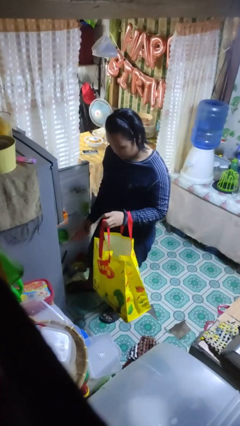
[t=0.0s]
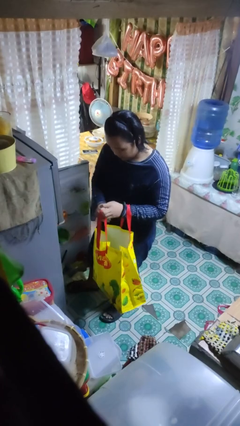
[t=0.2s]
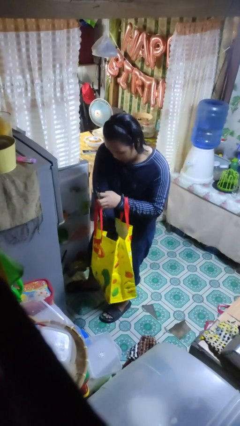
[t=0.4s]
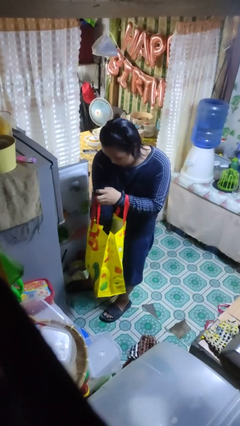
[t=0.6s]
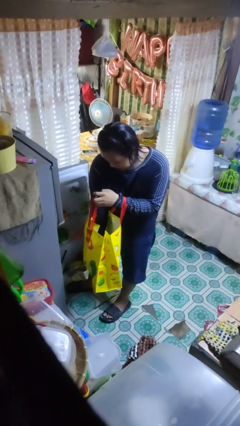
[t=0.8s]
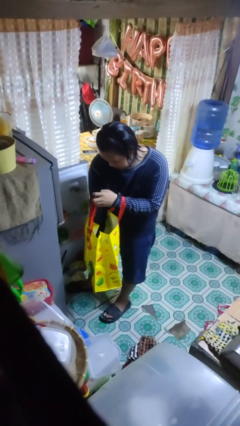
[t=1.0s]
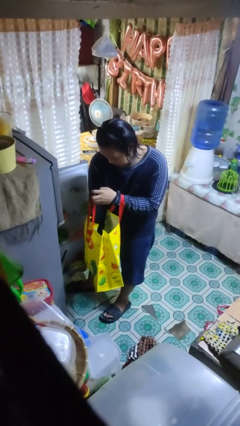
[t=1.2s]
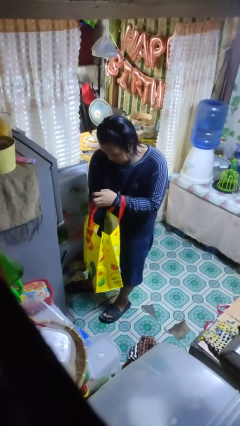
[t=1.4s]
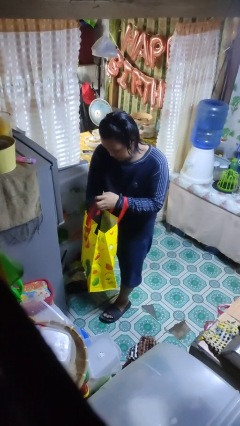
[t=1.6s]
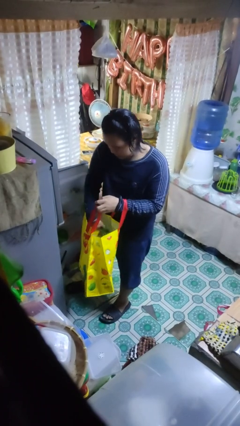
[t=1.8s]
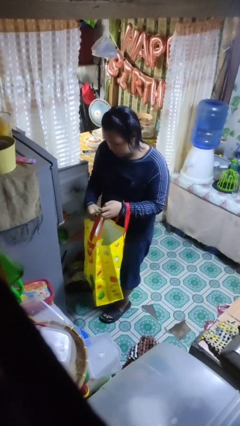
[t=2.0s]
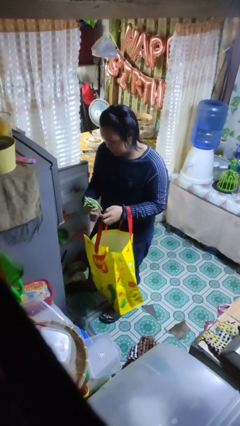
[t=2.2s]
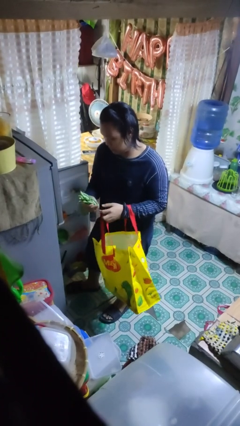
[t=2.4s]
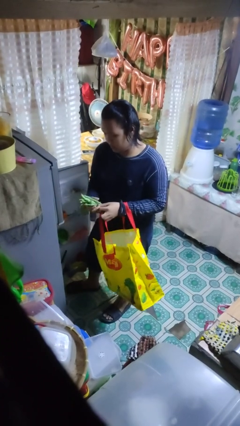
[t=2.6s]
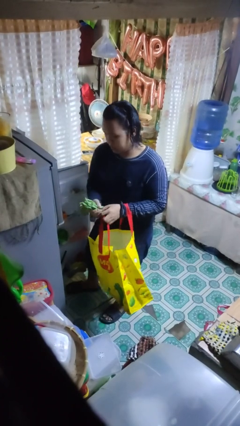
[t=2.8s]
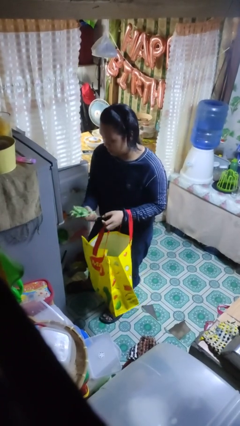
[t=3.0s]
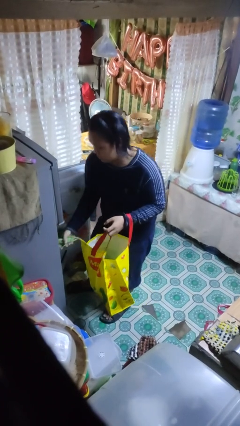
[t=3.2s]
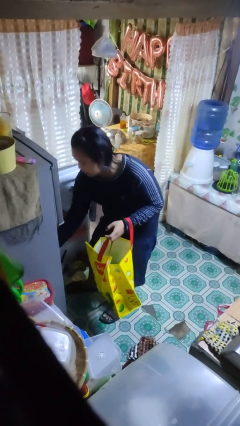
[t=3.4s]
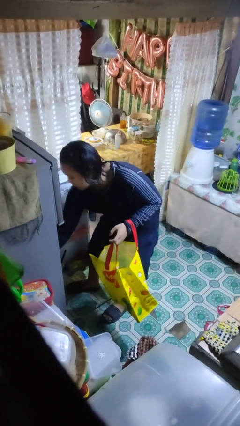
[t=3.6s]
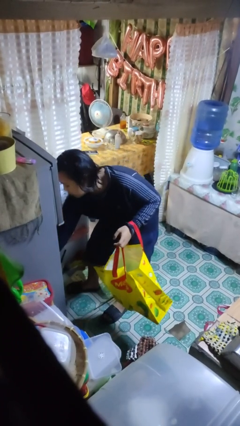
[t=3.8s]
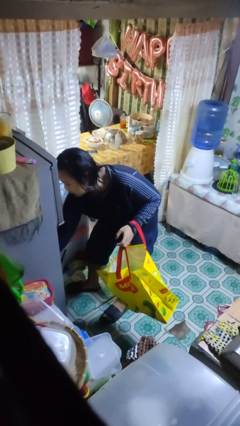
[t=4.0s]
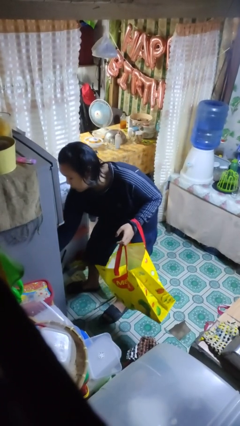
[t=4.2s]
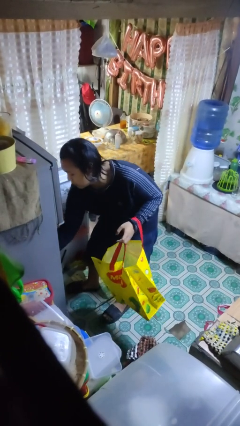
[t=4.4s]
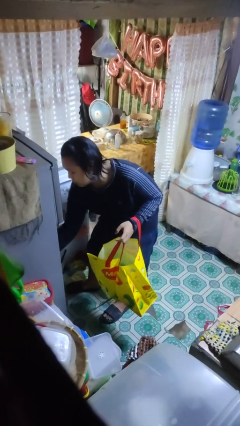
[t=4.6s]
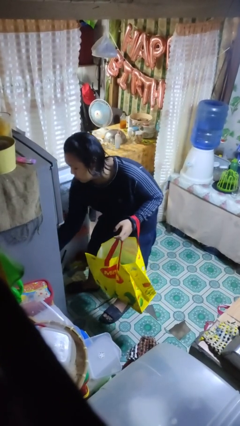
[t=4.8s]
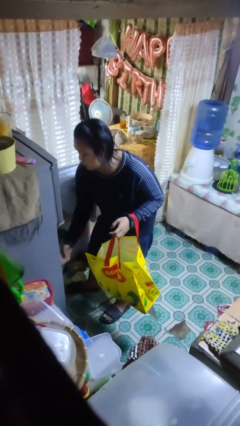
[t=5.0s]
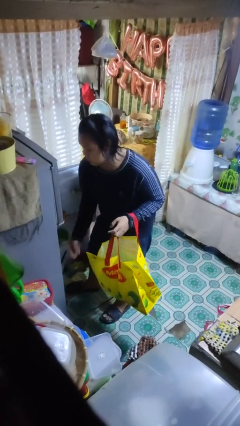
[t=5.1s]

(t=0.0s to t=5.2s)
person loads groceries into refrigerator

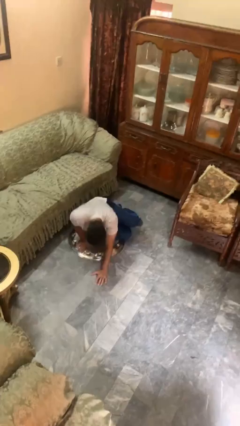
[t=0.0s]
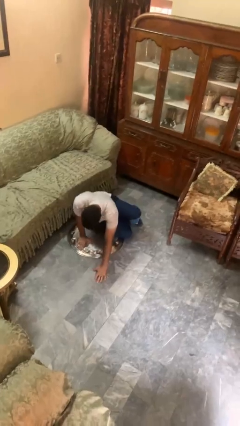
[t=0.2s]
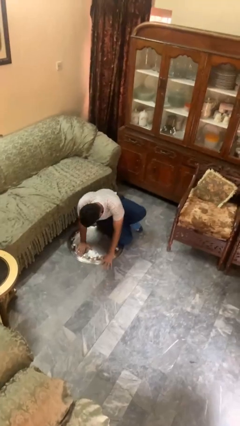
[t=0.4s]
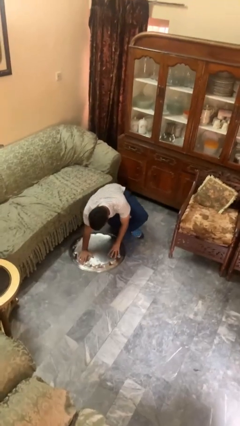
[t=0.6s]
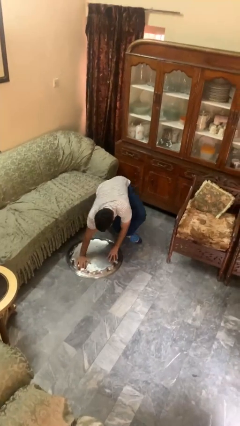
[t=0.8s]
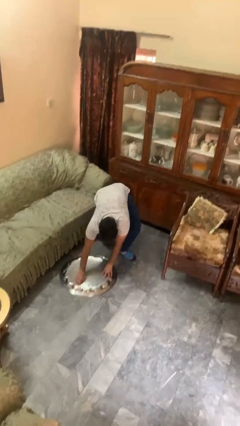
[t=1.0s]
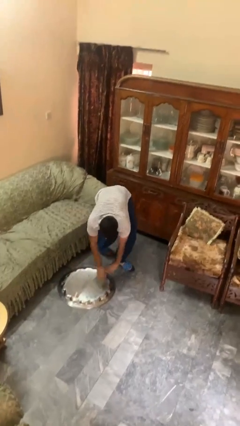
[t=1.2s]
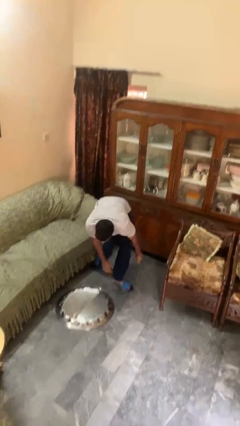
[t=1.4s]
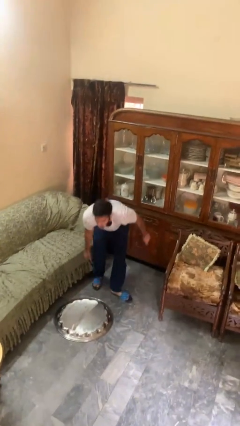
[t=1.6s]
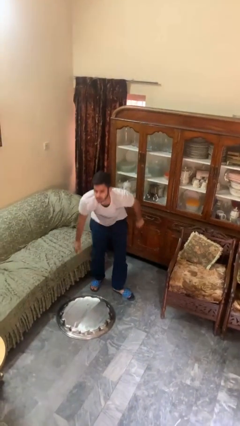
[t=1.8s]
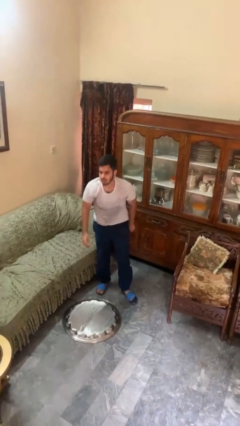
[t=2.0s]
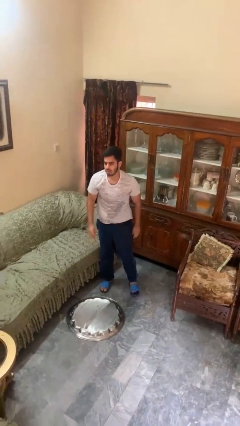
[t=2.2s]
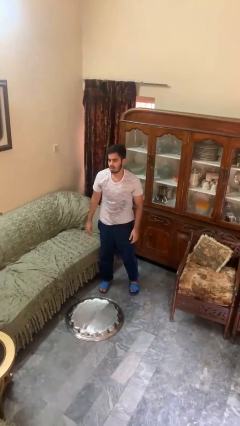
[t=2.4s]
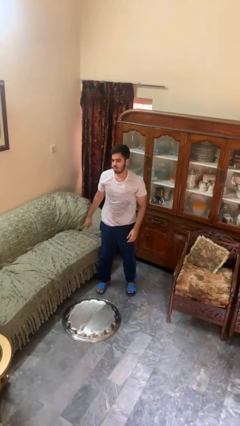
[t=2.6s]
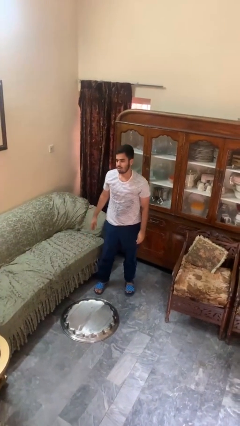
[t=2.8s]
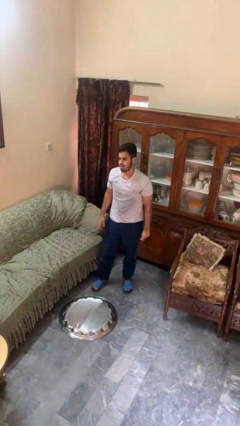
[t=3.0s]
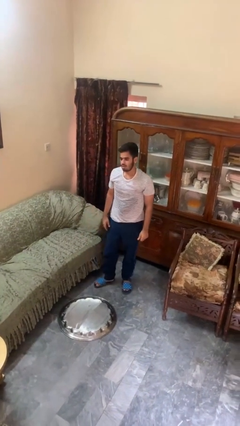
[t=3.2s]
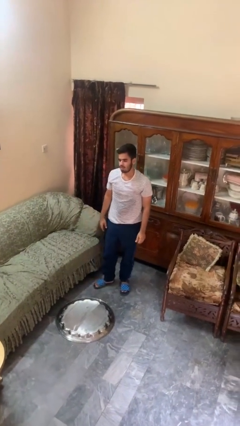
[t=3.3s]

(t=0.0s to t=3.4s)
person stands up from floor

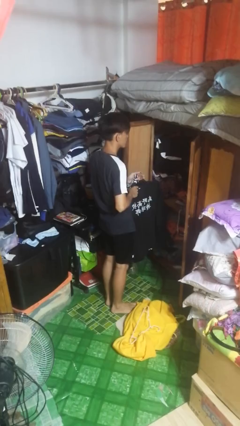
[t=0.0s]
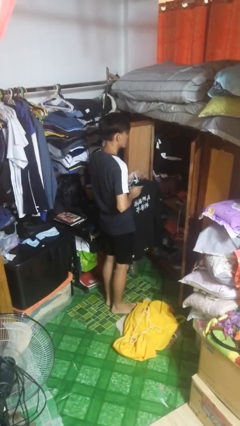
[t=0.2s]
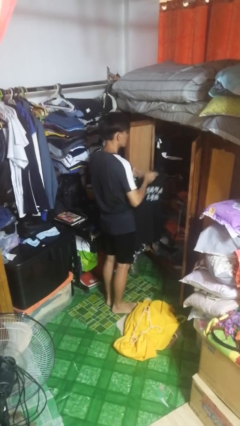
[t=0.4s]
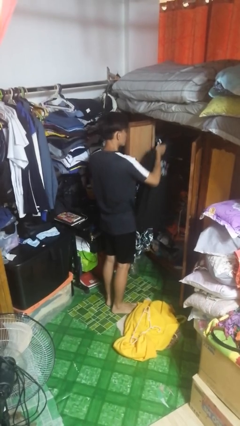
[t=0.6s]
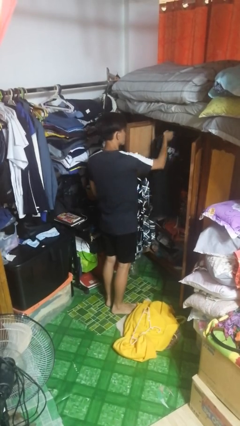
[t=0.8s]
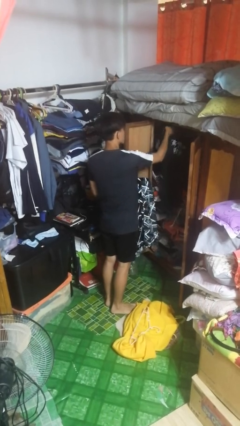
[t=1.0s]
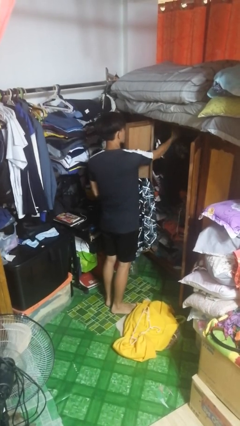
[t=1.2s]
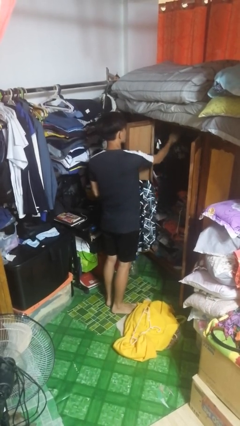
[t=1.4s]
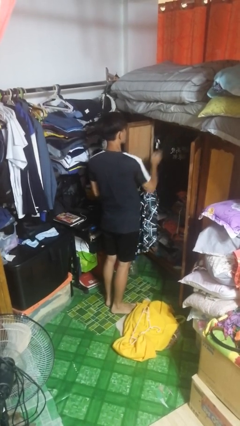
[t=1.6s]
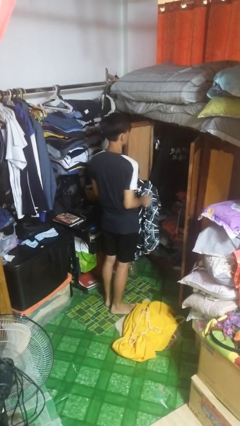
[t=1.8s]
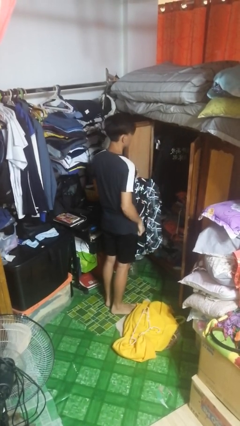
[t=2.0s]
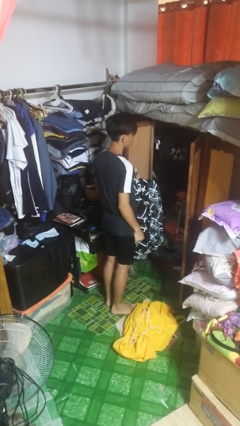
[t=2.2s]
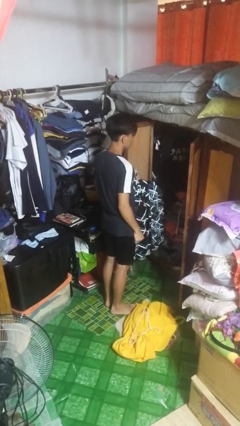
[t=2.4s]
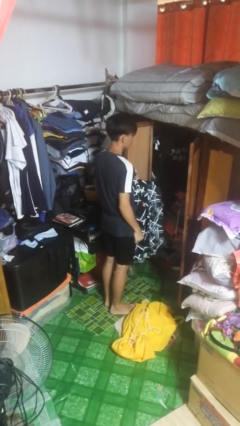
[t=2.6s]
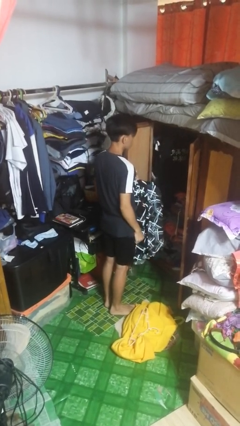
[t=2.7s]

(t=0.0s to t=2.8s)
person puts clothes into closet

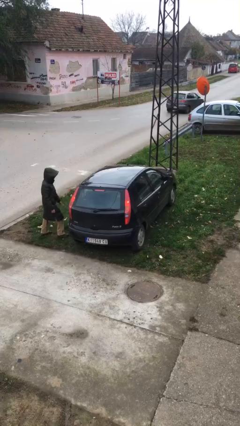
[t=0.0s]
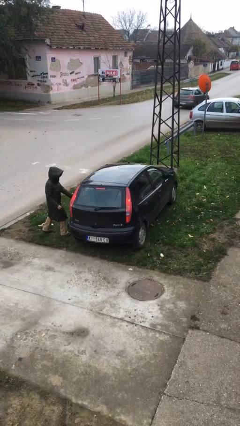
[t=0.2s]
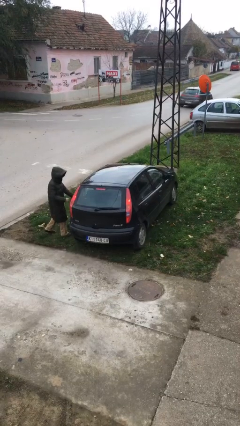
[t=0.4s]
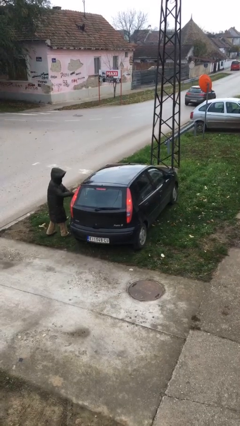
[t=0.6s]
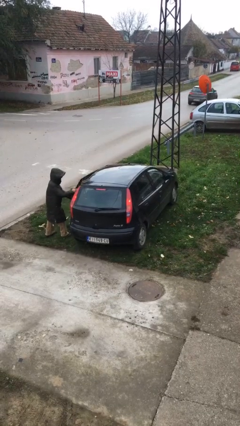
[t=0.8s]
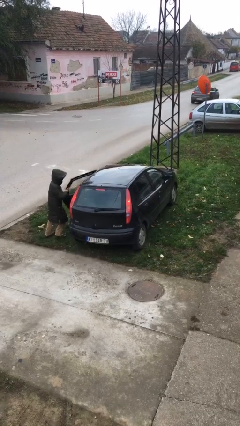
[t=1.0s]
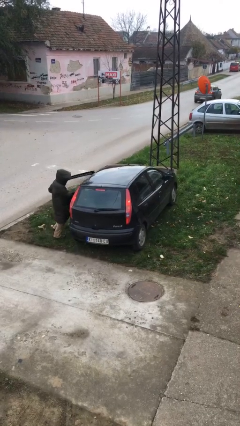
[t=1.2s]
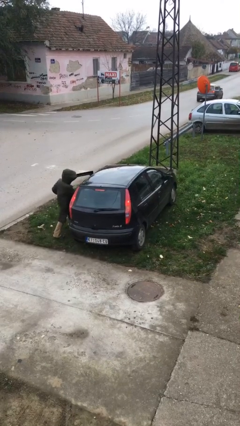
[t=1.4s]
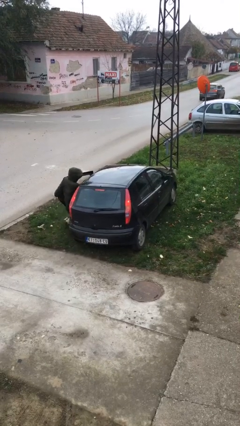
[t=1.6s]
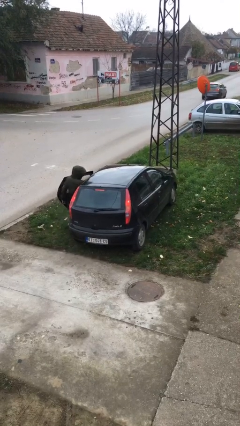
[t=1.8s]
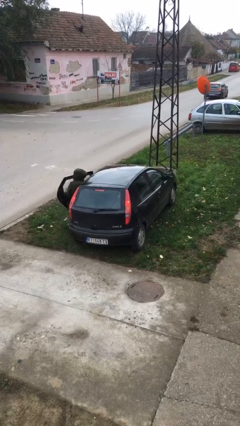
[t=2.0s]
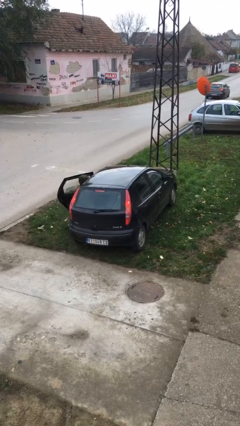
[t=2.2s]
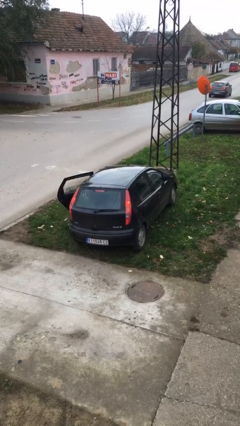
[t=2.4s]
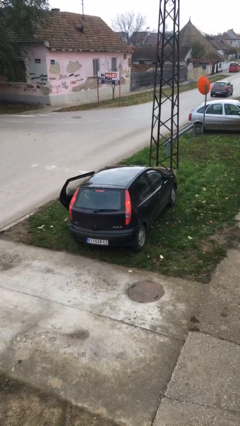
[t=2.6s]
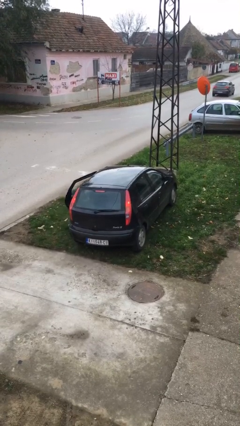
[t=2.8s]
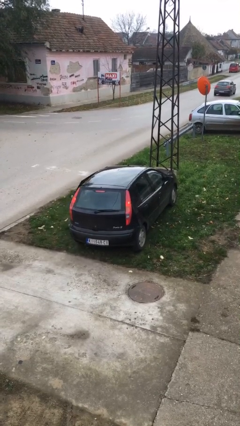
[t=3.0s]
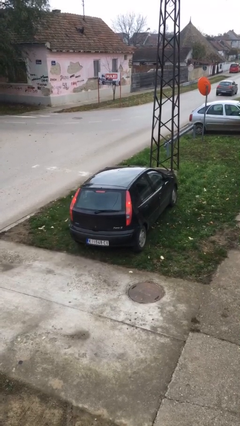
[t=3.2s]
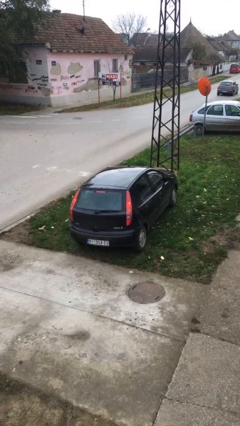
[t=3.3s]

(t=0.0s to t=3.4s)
car picks up person

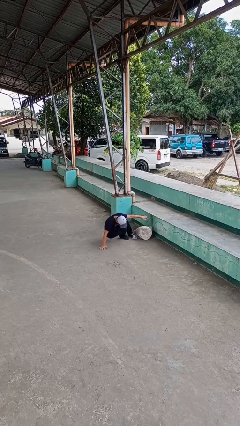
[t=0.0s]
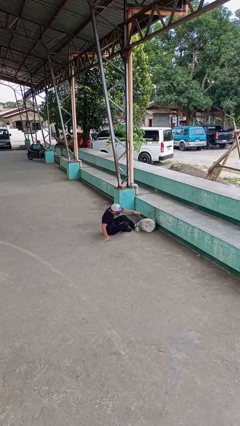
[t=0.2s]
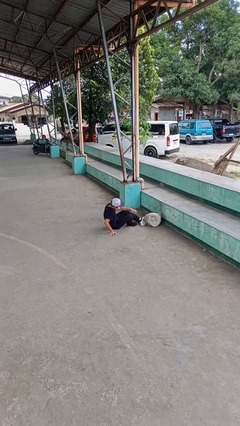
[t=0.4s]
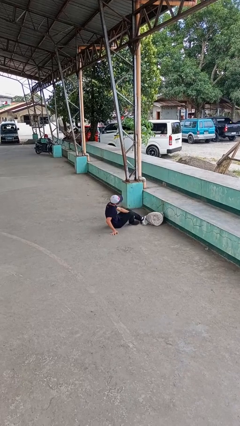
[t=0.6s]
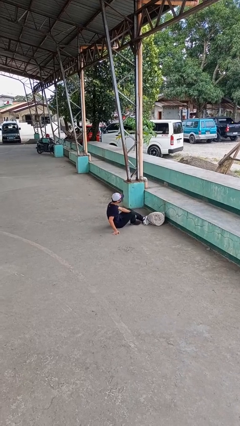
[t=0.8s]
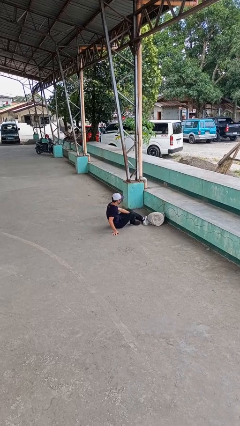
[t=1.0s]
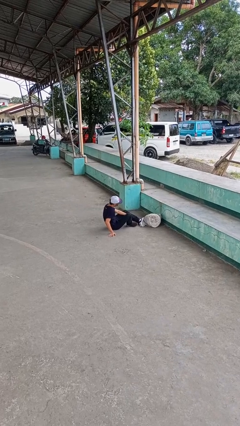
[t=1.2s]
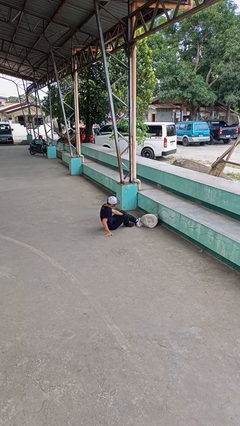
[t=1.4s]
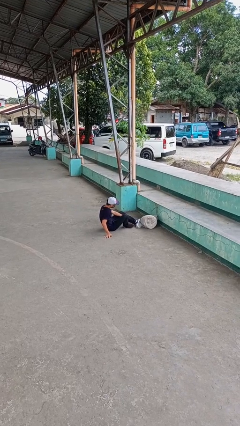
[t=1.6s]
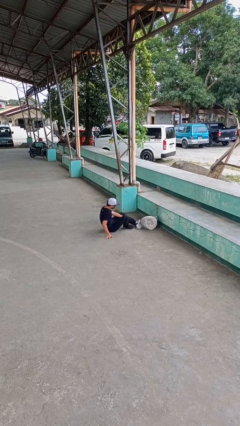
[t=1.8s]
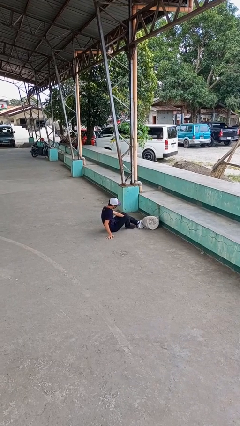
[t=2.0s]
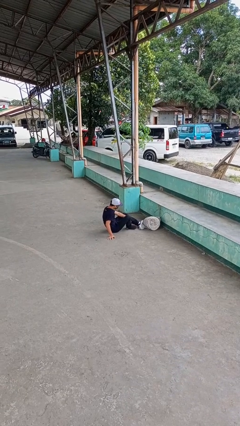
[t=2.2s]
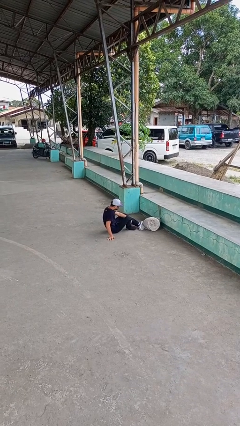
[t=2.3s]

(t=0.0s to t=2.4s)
person lies down on floor

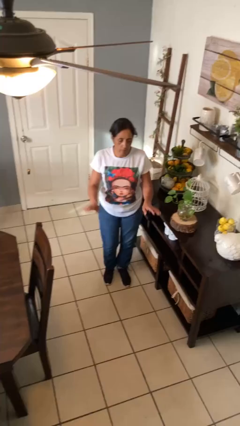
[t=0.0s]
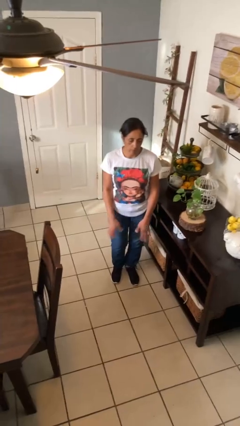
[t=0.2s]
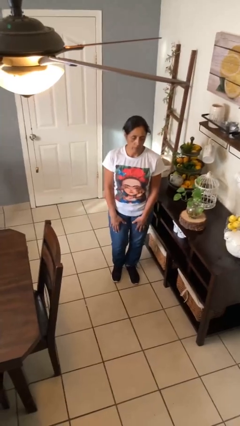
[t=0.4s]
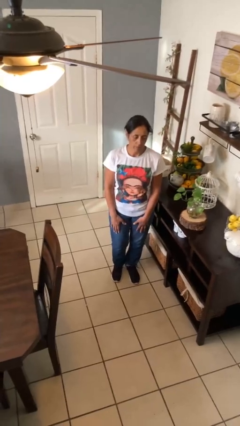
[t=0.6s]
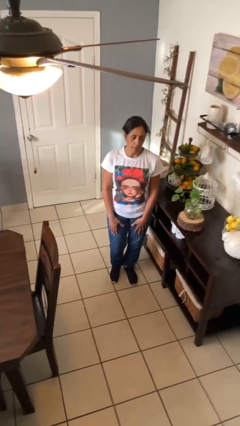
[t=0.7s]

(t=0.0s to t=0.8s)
person slaps hands on thighs
